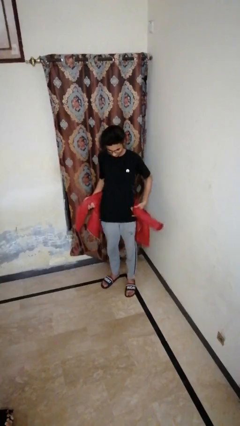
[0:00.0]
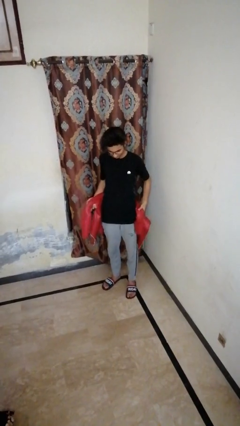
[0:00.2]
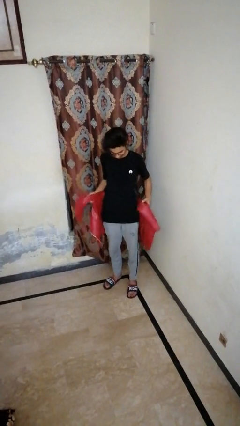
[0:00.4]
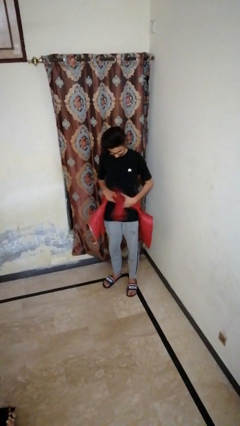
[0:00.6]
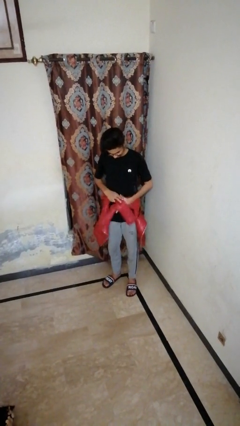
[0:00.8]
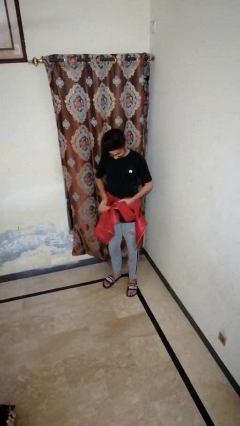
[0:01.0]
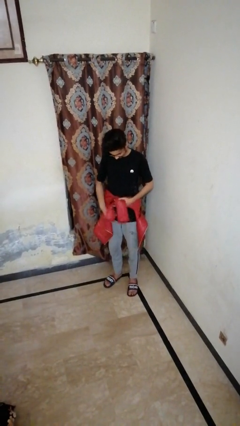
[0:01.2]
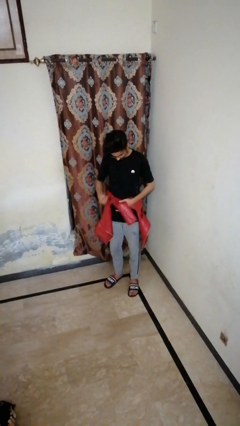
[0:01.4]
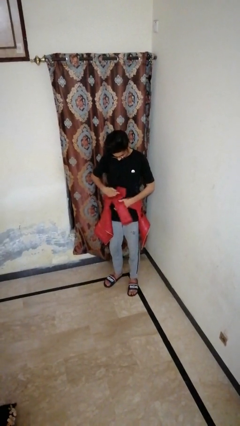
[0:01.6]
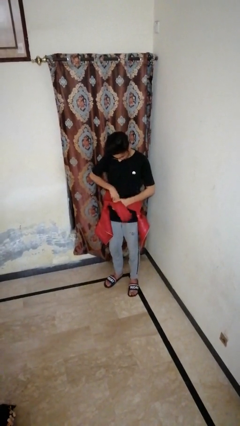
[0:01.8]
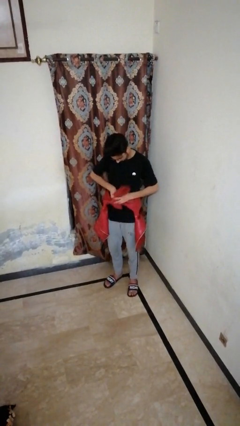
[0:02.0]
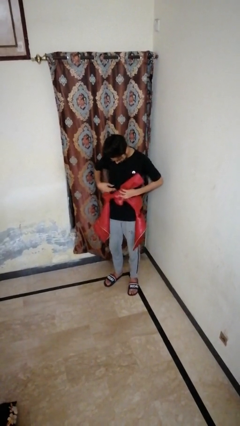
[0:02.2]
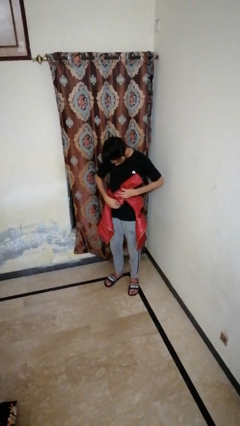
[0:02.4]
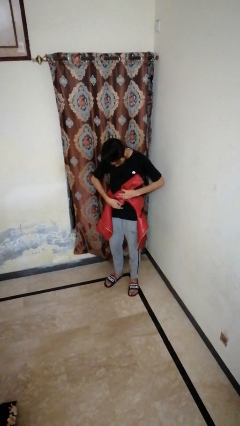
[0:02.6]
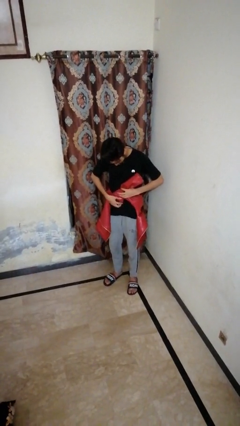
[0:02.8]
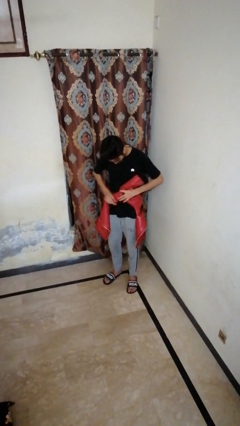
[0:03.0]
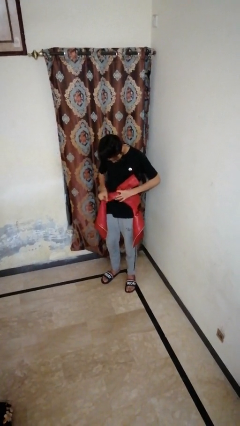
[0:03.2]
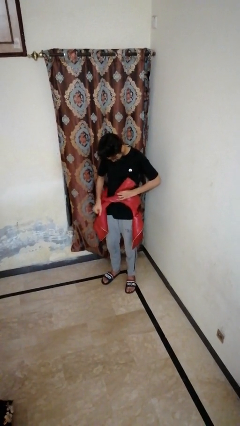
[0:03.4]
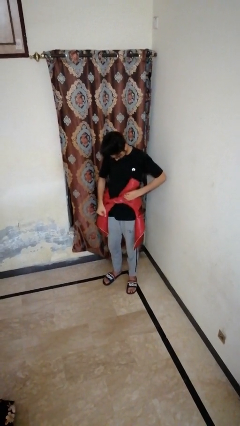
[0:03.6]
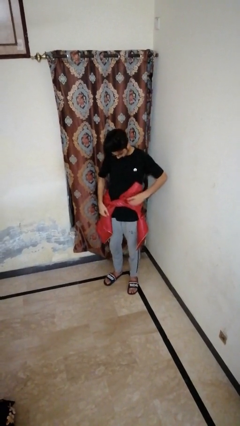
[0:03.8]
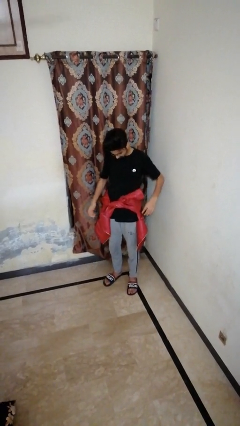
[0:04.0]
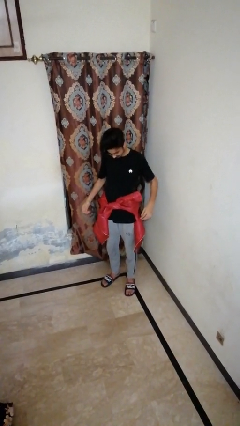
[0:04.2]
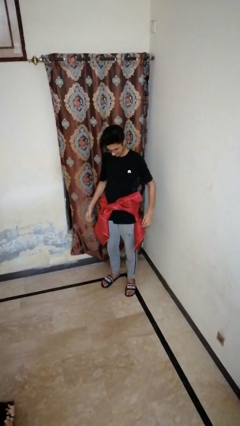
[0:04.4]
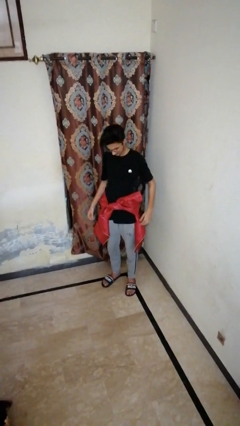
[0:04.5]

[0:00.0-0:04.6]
person ties jacket around waist

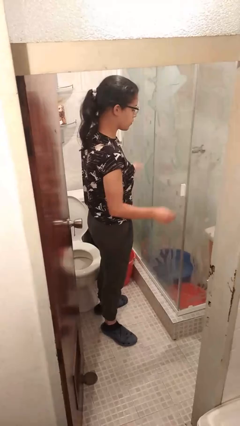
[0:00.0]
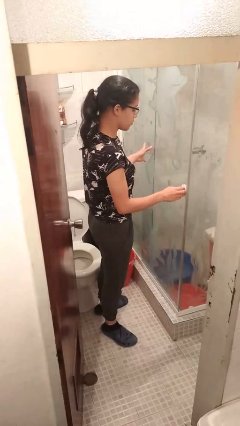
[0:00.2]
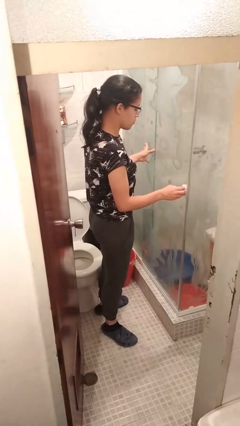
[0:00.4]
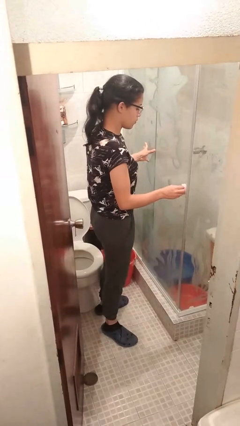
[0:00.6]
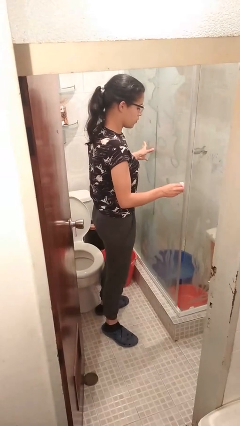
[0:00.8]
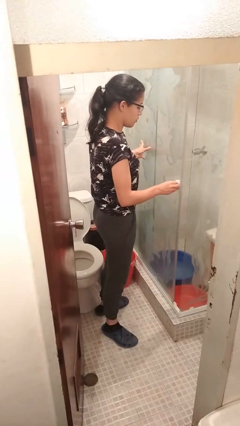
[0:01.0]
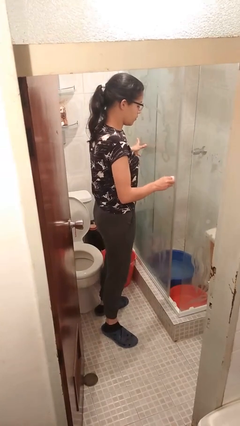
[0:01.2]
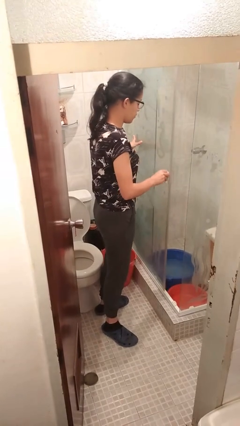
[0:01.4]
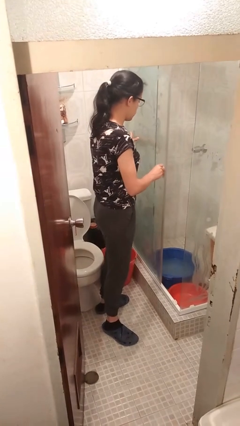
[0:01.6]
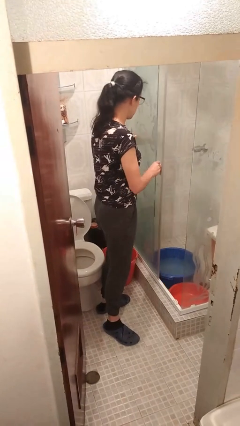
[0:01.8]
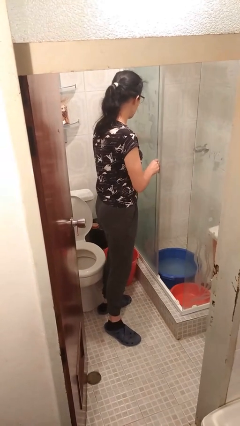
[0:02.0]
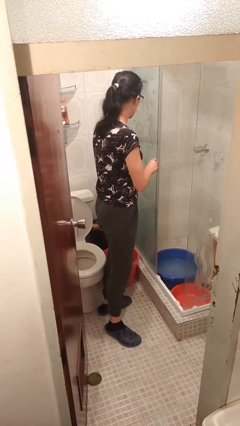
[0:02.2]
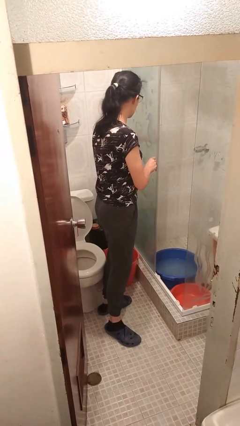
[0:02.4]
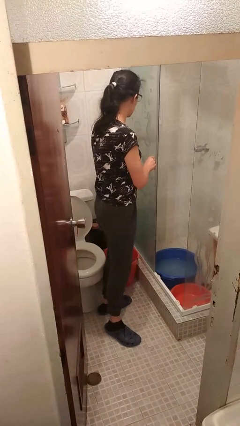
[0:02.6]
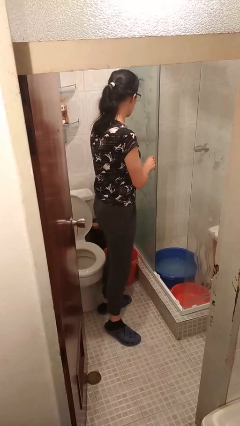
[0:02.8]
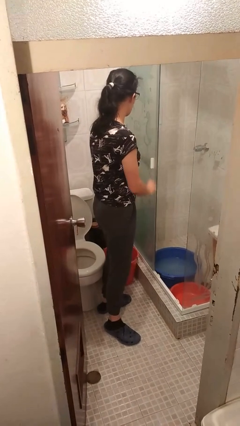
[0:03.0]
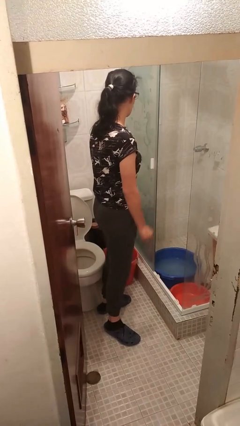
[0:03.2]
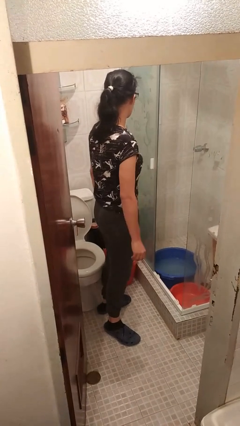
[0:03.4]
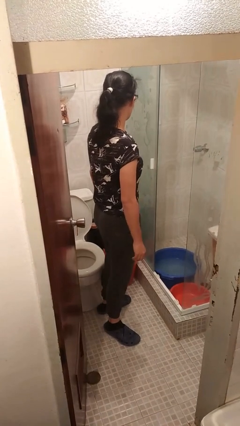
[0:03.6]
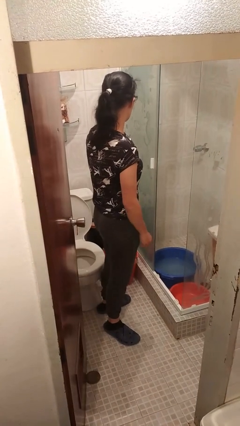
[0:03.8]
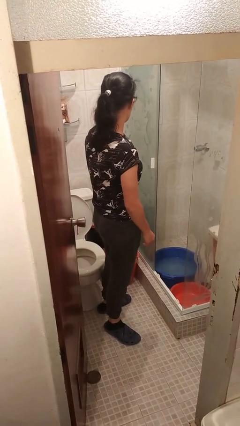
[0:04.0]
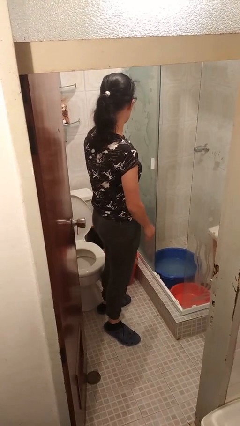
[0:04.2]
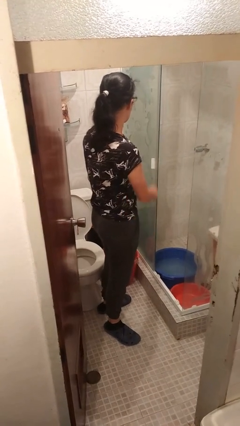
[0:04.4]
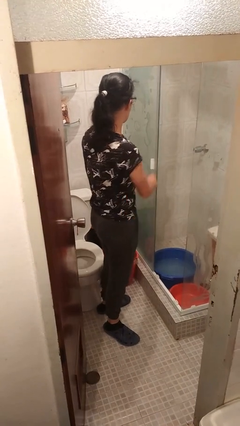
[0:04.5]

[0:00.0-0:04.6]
person opens sliding door

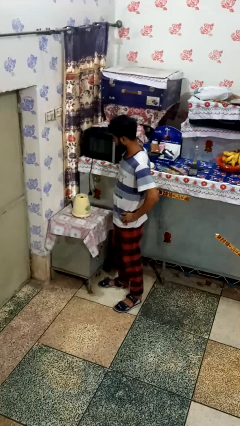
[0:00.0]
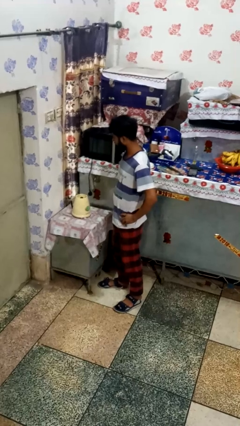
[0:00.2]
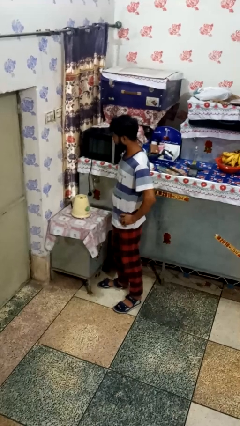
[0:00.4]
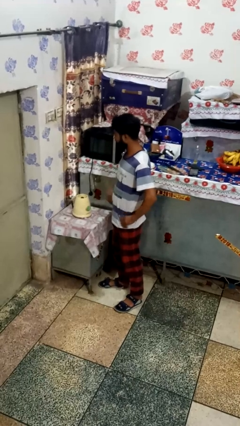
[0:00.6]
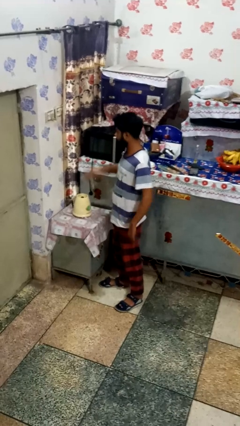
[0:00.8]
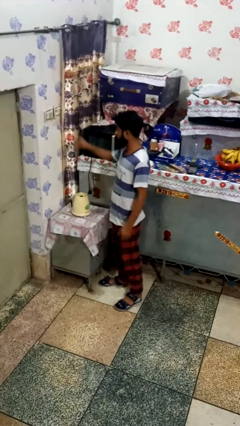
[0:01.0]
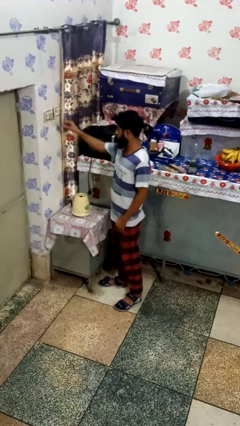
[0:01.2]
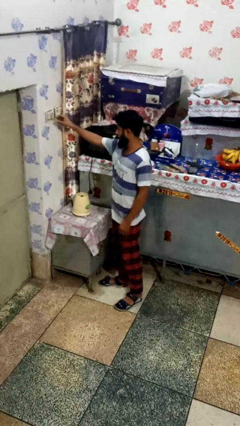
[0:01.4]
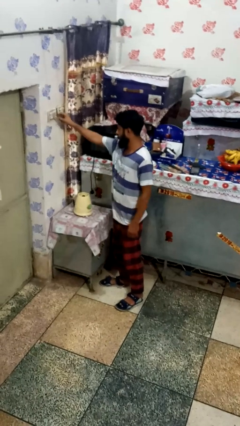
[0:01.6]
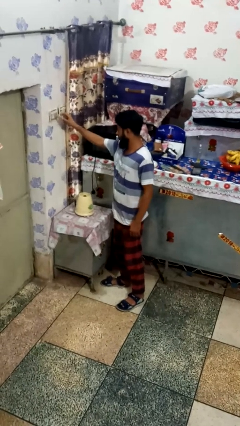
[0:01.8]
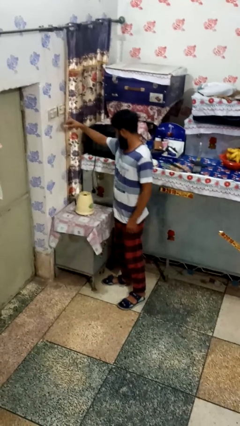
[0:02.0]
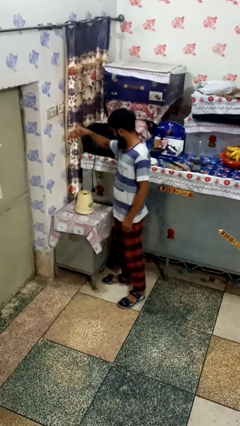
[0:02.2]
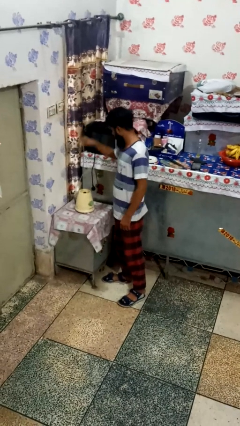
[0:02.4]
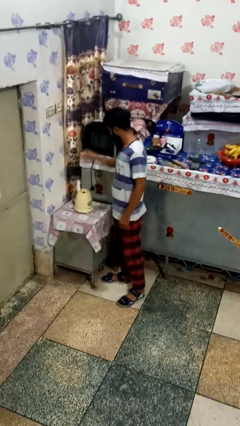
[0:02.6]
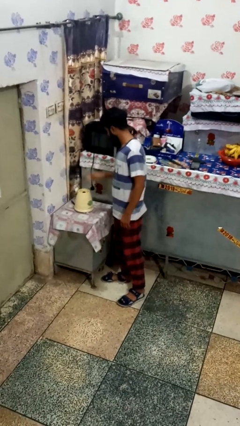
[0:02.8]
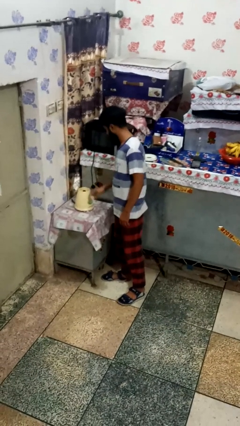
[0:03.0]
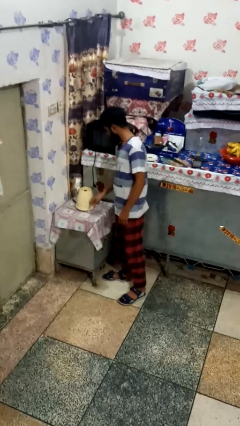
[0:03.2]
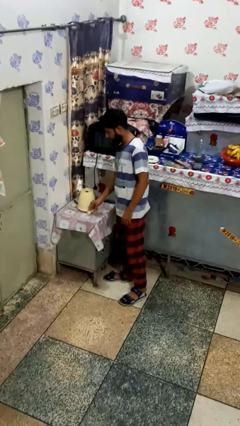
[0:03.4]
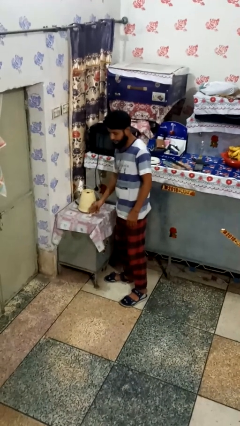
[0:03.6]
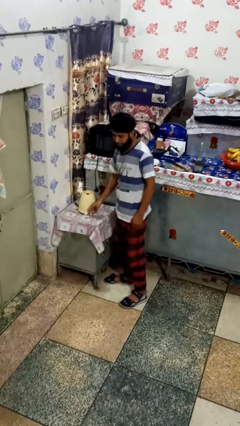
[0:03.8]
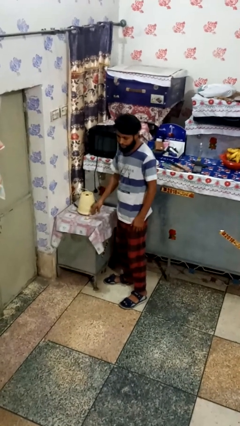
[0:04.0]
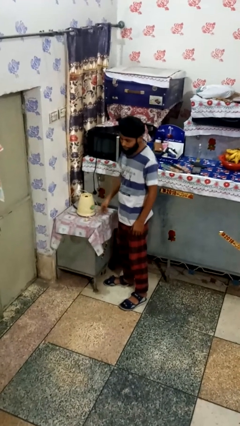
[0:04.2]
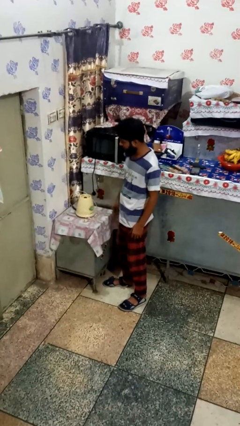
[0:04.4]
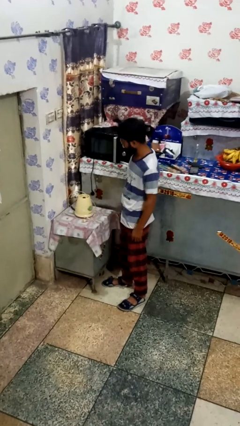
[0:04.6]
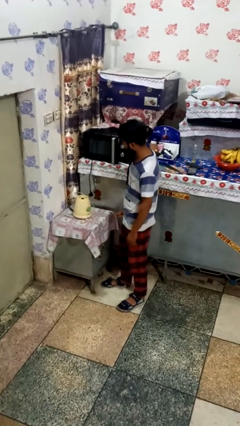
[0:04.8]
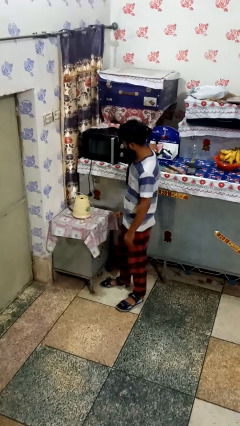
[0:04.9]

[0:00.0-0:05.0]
person unplugs from electrical socket

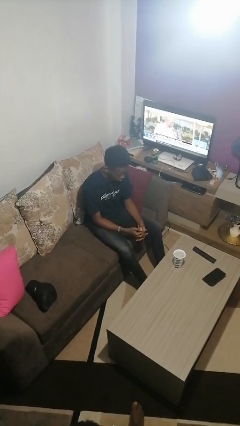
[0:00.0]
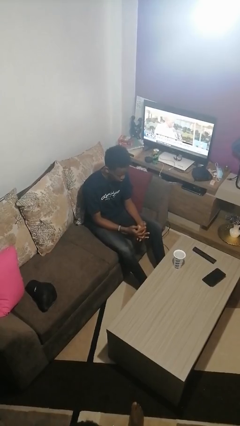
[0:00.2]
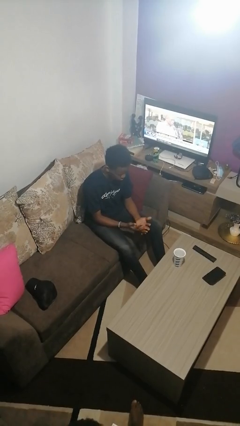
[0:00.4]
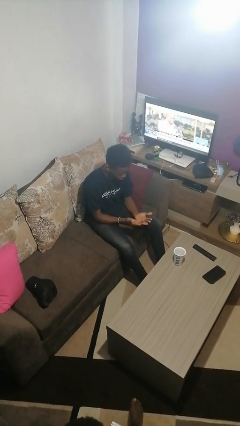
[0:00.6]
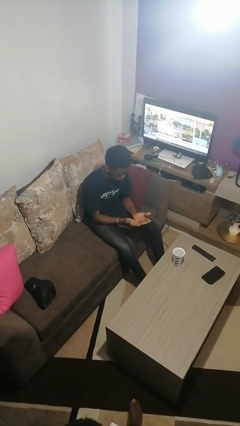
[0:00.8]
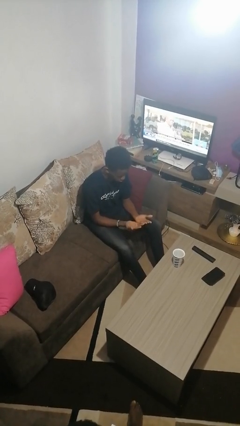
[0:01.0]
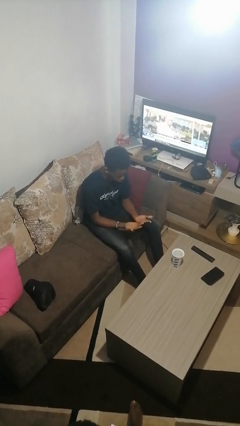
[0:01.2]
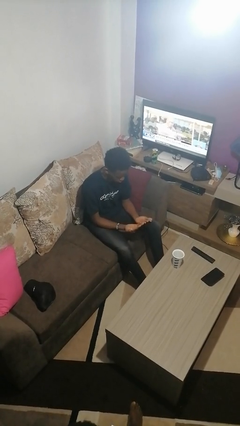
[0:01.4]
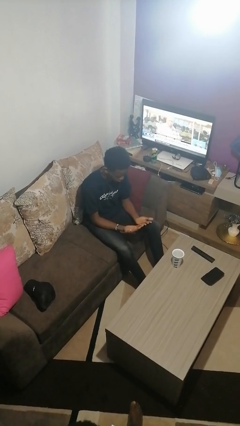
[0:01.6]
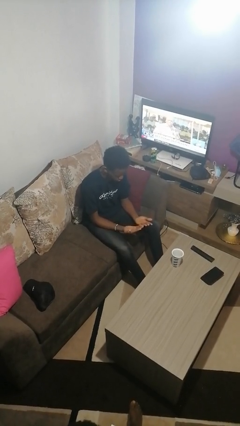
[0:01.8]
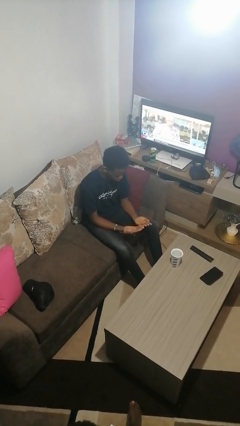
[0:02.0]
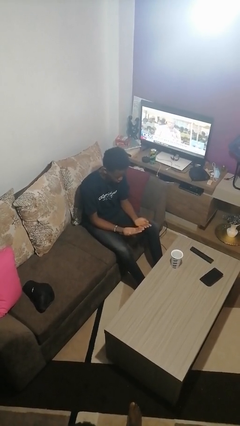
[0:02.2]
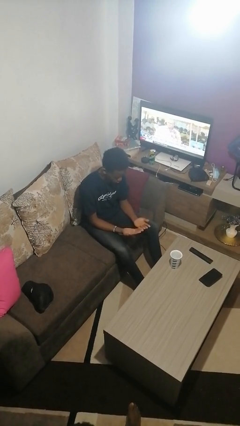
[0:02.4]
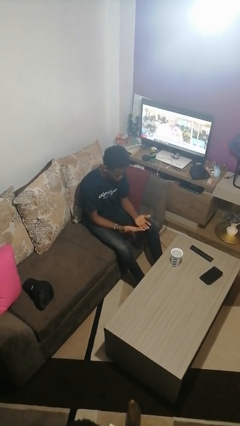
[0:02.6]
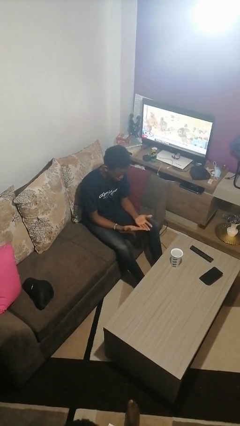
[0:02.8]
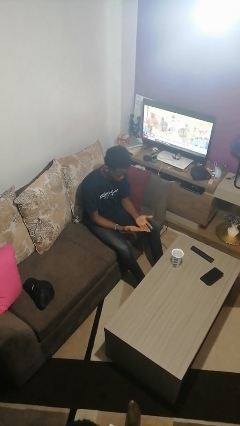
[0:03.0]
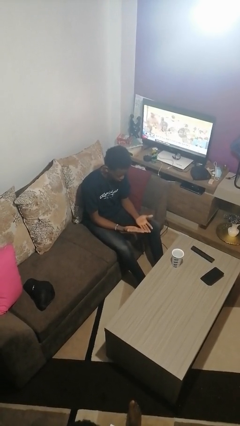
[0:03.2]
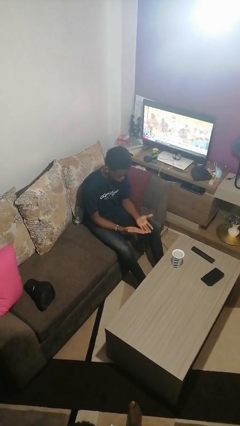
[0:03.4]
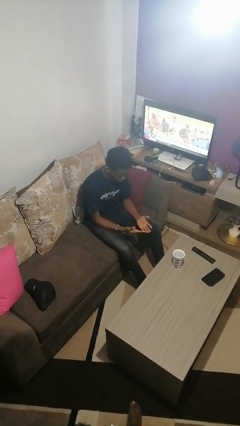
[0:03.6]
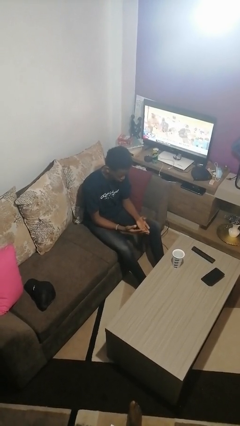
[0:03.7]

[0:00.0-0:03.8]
person looks at hands in lap
